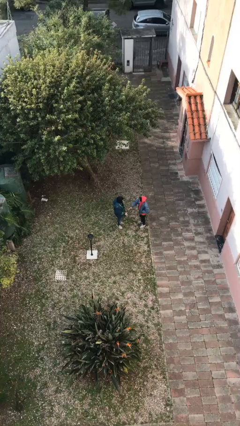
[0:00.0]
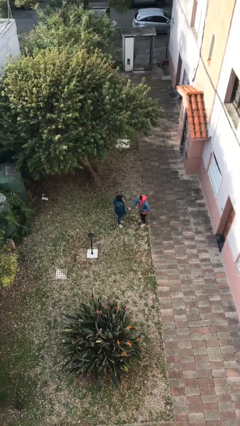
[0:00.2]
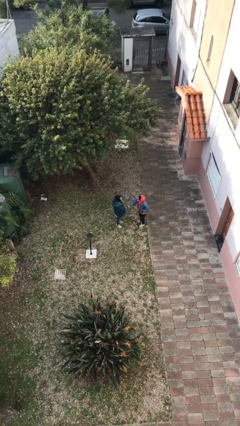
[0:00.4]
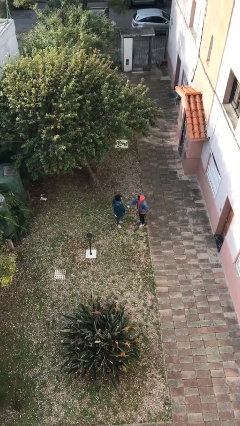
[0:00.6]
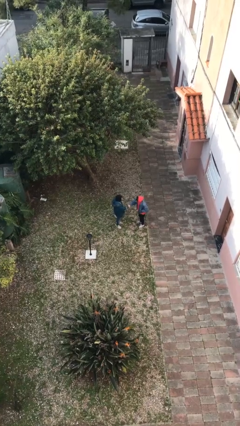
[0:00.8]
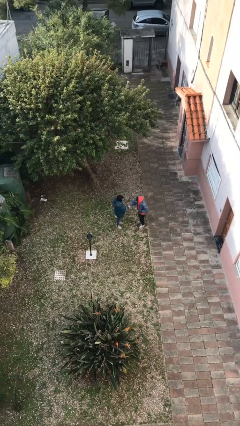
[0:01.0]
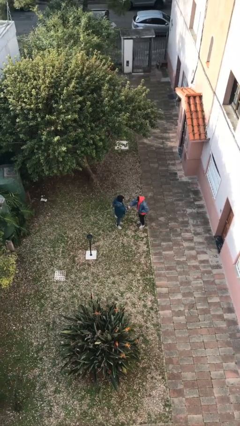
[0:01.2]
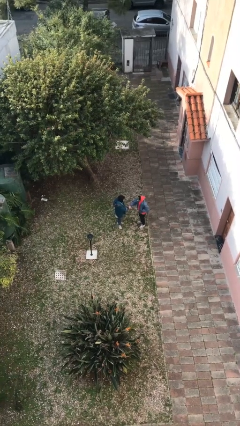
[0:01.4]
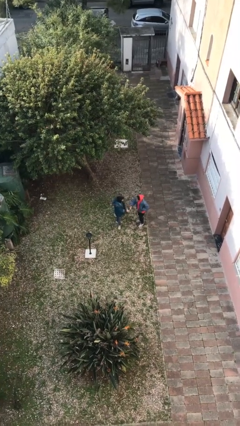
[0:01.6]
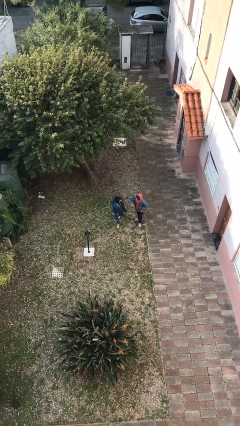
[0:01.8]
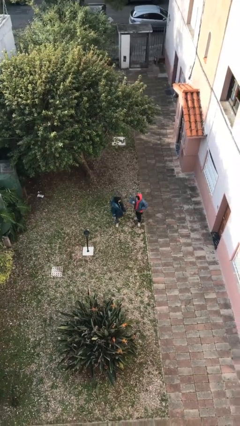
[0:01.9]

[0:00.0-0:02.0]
person shakes hand

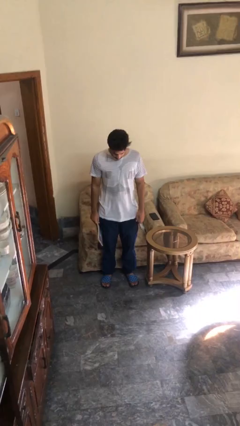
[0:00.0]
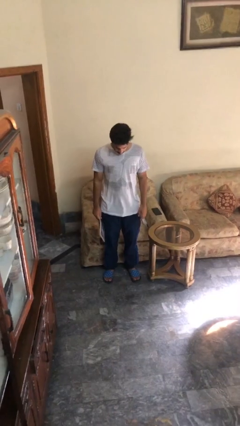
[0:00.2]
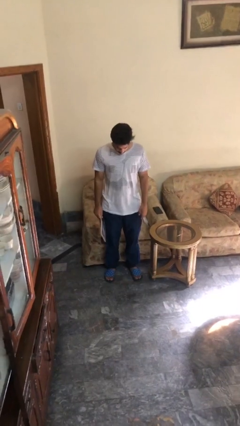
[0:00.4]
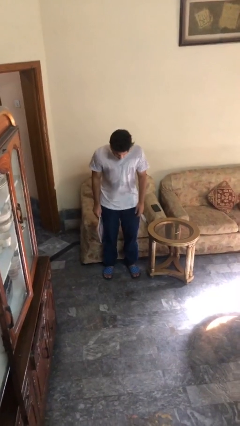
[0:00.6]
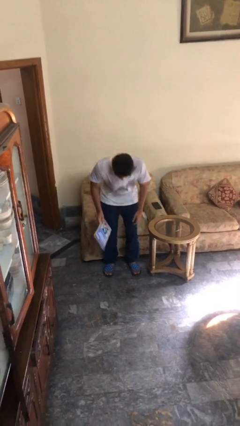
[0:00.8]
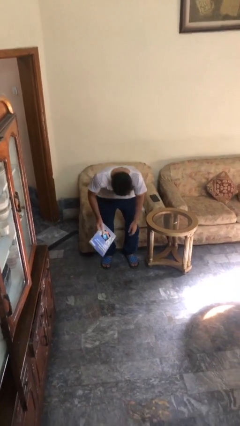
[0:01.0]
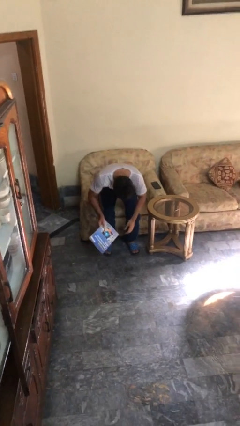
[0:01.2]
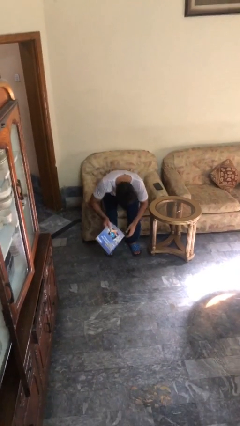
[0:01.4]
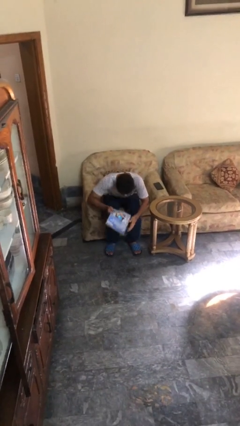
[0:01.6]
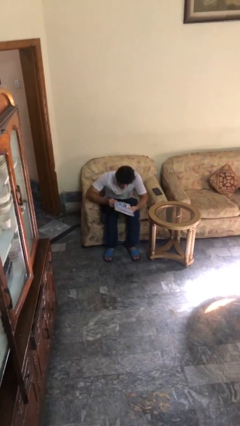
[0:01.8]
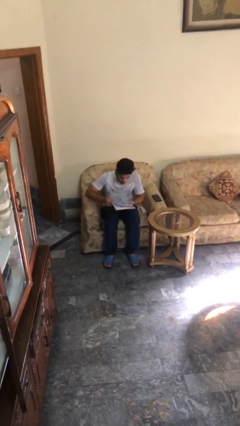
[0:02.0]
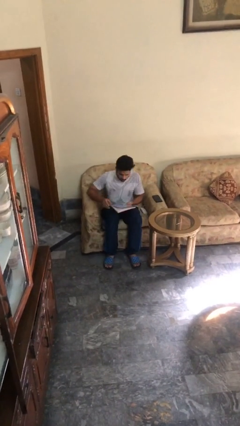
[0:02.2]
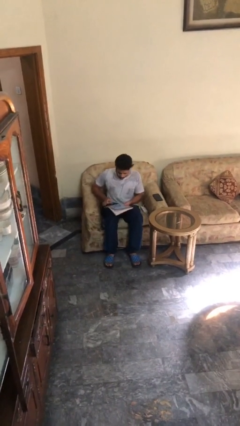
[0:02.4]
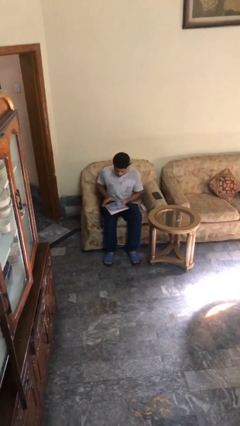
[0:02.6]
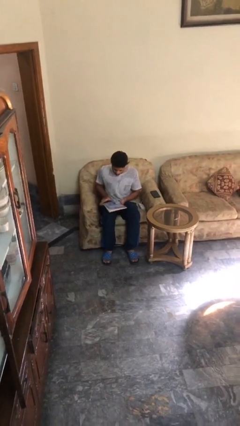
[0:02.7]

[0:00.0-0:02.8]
person sits down

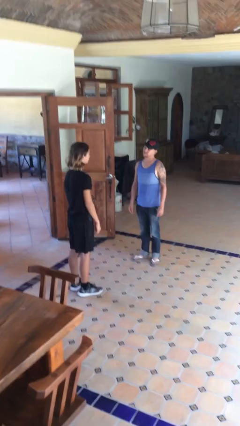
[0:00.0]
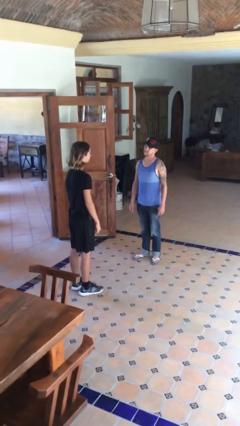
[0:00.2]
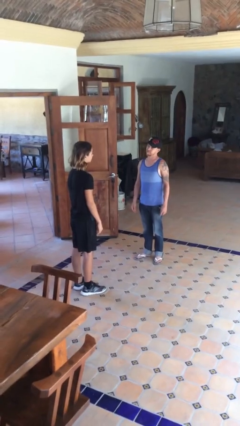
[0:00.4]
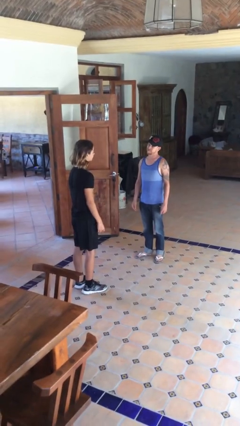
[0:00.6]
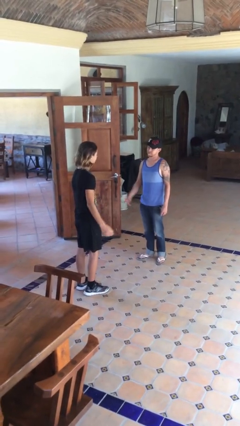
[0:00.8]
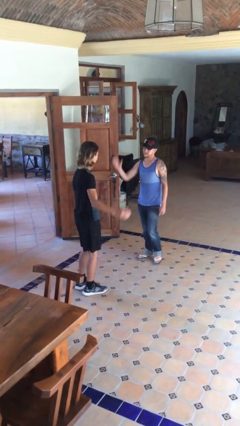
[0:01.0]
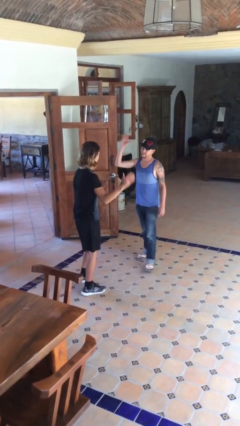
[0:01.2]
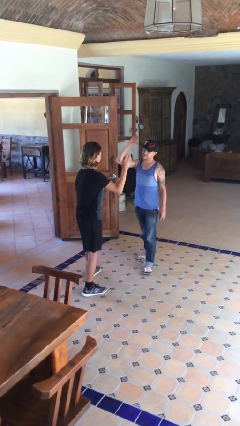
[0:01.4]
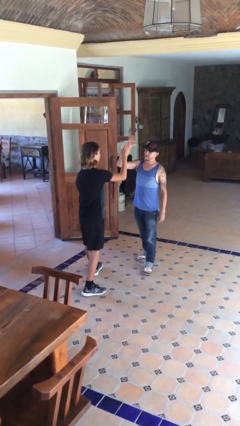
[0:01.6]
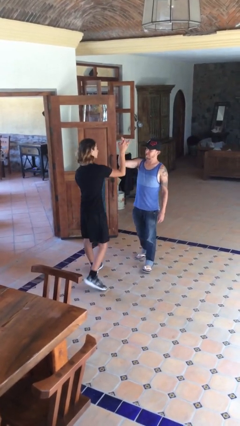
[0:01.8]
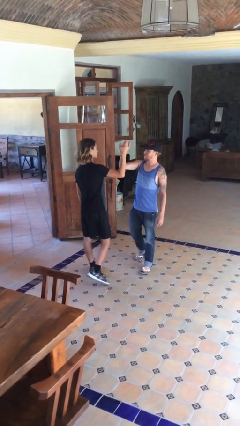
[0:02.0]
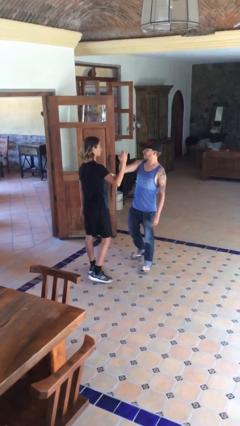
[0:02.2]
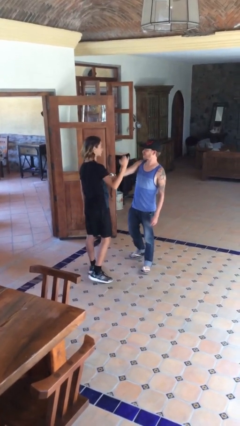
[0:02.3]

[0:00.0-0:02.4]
person highfives hand

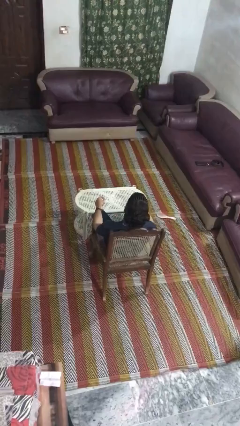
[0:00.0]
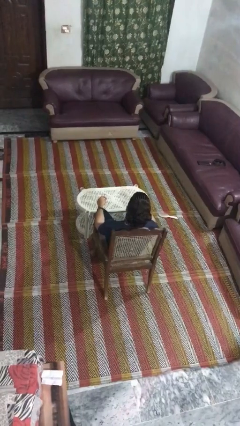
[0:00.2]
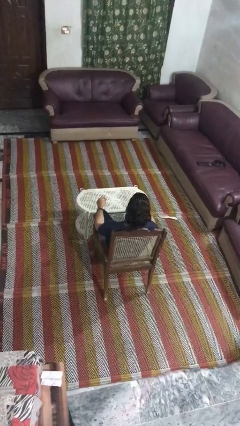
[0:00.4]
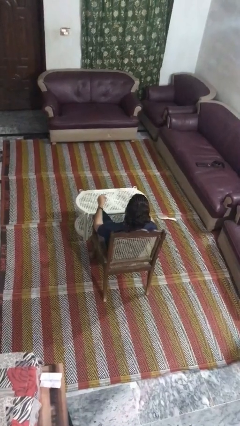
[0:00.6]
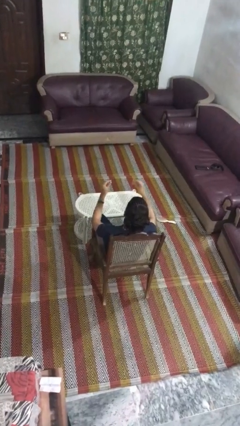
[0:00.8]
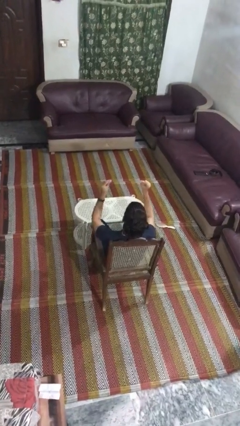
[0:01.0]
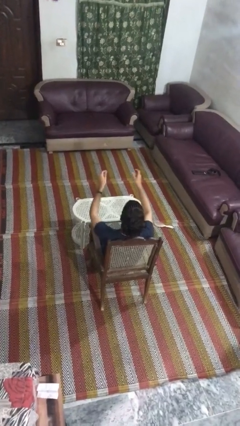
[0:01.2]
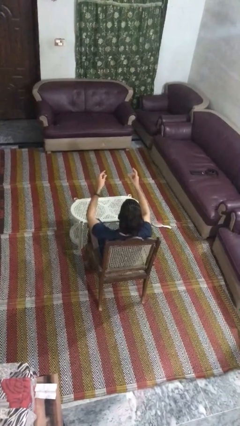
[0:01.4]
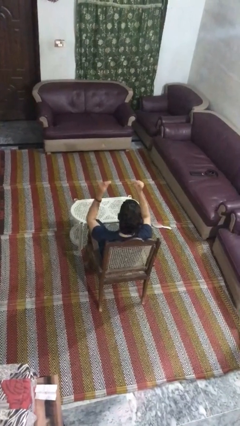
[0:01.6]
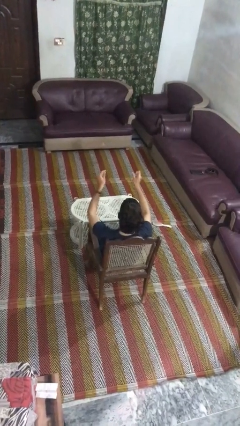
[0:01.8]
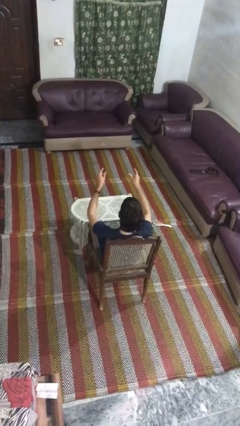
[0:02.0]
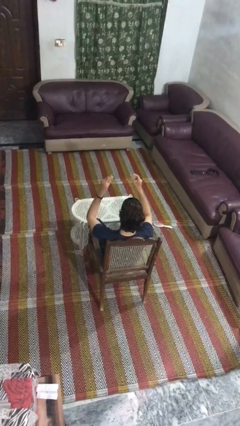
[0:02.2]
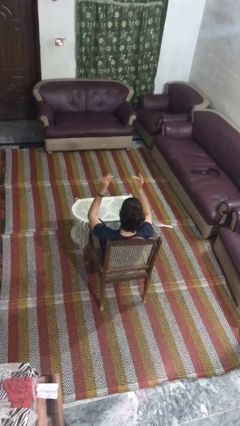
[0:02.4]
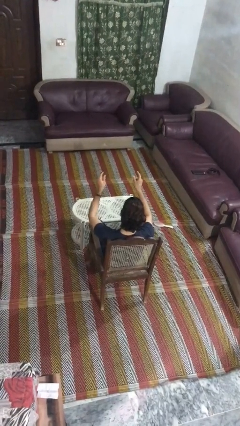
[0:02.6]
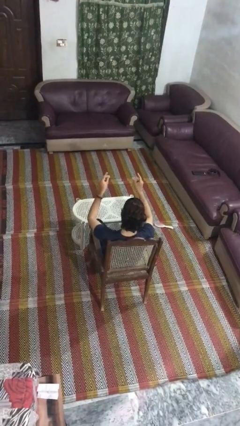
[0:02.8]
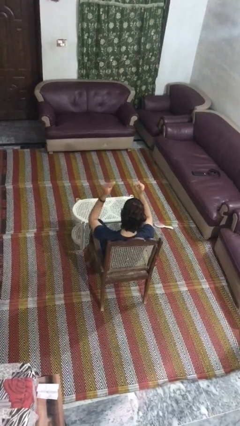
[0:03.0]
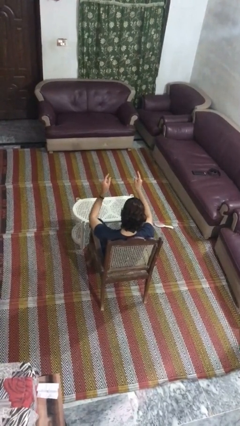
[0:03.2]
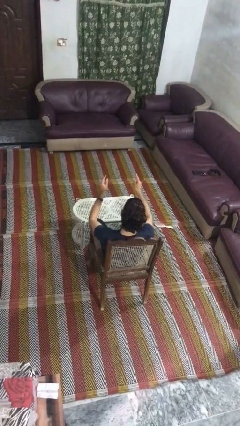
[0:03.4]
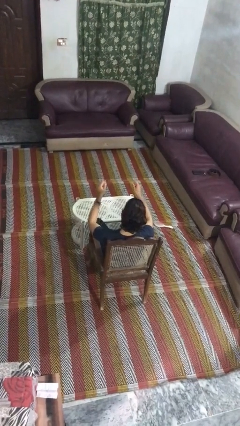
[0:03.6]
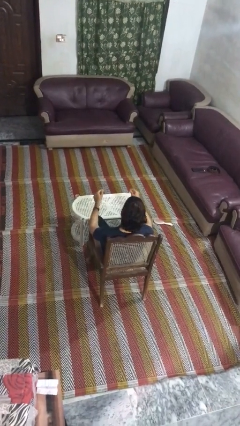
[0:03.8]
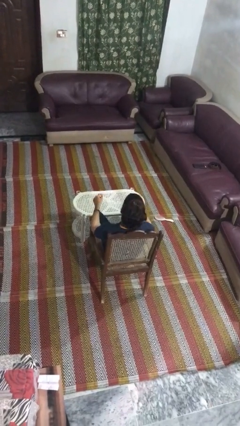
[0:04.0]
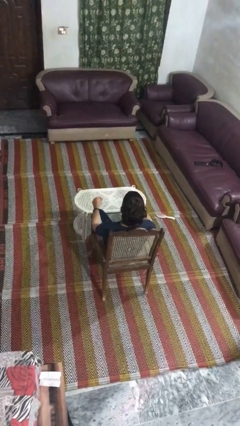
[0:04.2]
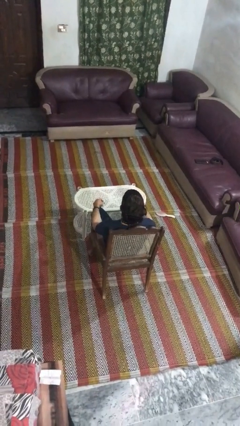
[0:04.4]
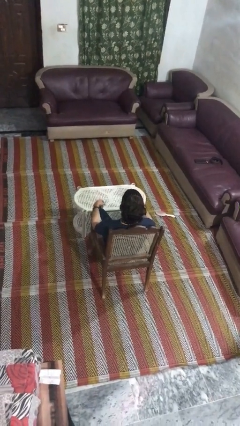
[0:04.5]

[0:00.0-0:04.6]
person snaps fingers

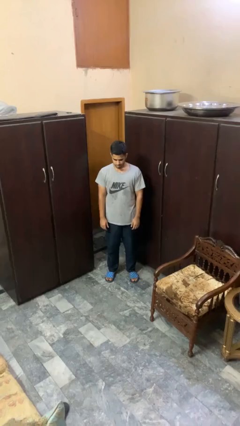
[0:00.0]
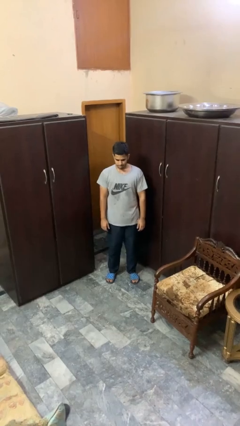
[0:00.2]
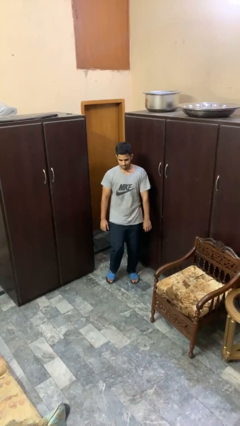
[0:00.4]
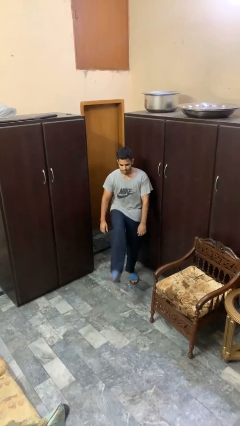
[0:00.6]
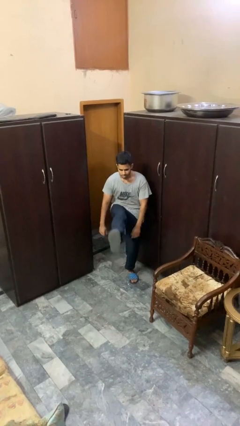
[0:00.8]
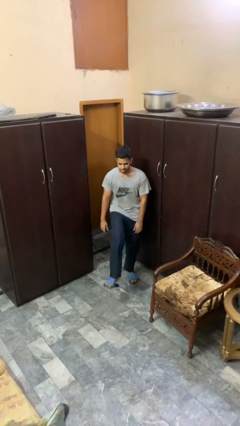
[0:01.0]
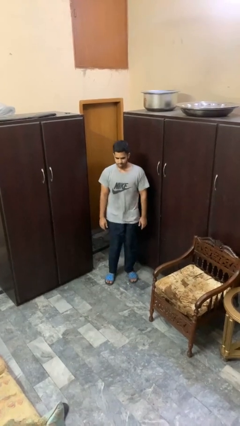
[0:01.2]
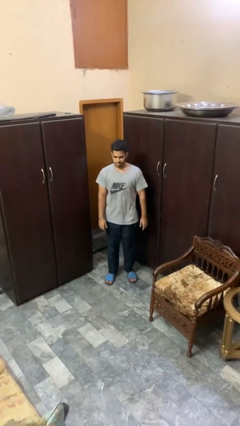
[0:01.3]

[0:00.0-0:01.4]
person karate kicks

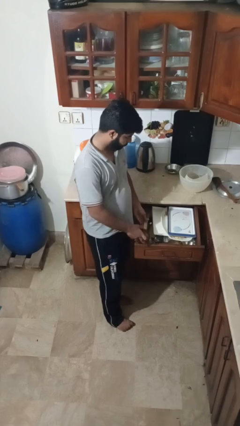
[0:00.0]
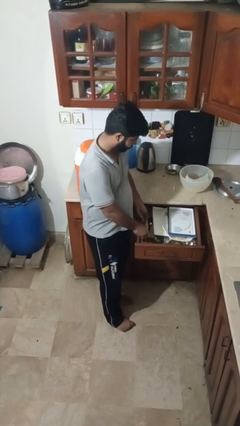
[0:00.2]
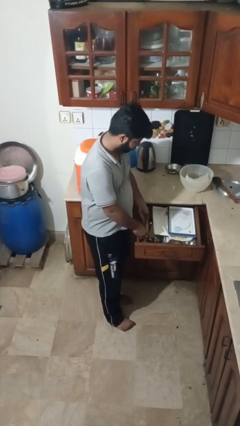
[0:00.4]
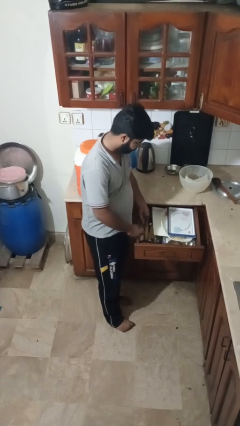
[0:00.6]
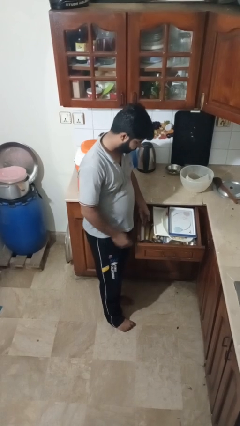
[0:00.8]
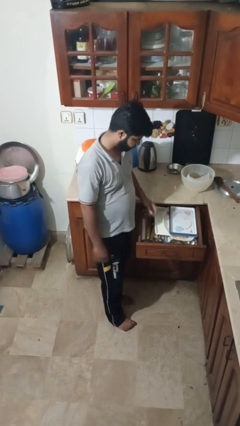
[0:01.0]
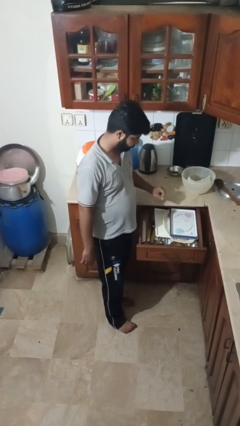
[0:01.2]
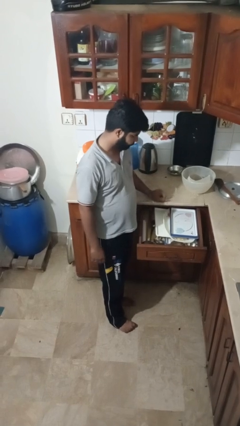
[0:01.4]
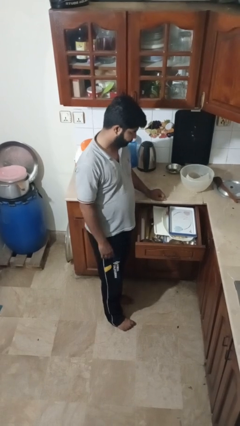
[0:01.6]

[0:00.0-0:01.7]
person puts object into kitchen drawer

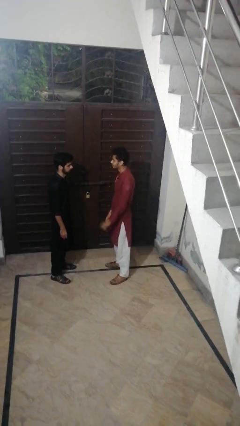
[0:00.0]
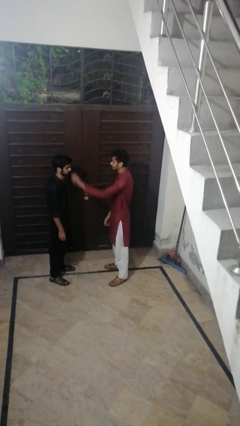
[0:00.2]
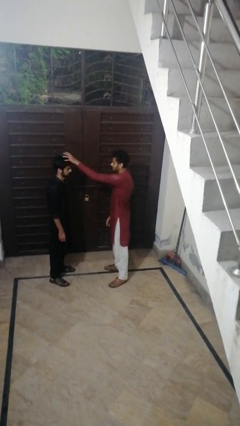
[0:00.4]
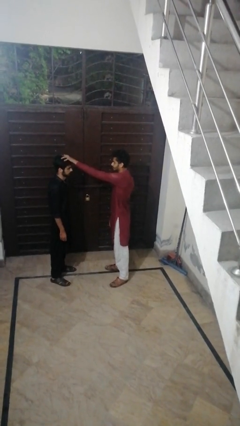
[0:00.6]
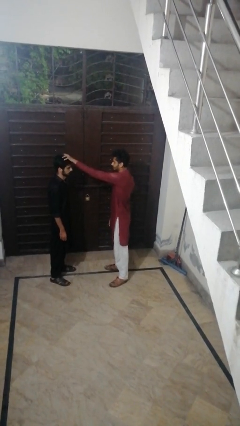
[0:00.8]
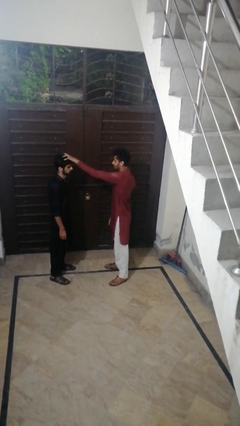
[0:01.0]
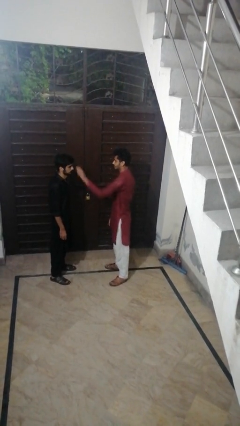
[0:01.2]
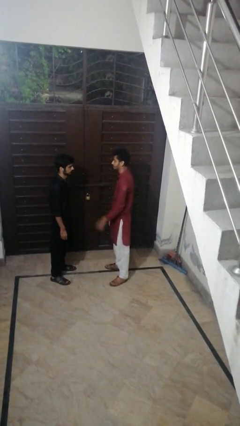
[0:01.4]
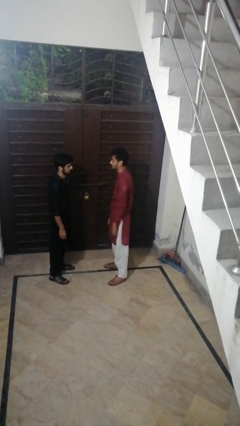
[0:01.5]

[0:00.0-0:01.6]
person grabs person by hair

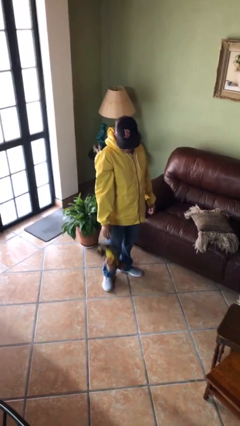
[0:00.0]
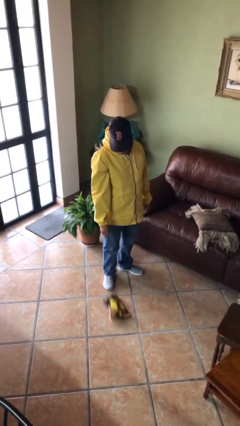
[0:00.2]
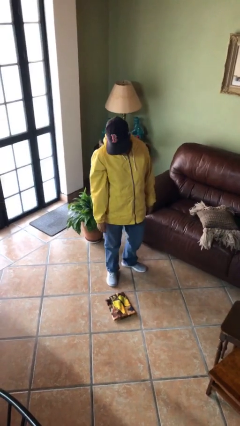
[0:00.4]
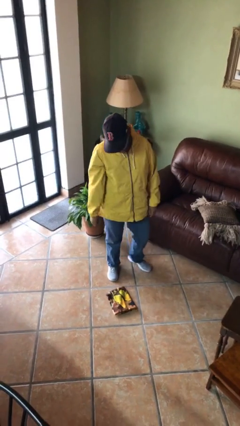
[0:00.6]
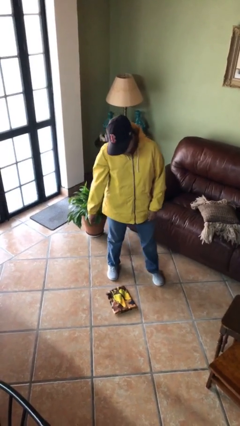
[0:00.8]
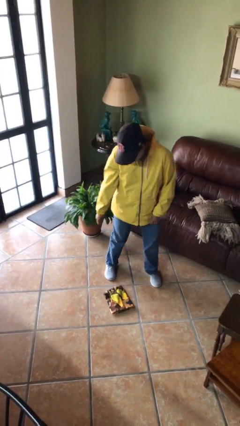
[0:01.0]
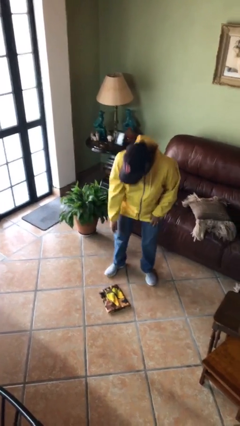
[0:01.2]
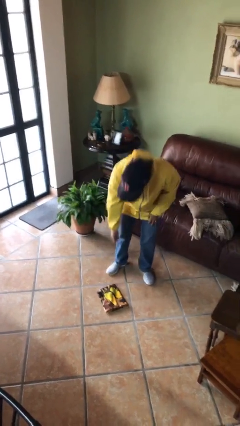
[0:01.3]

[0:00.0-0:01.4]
person drops object
